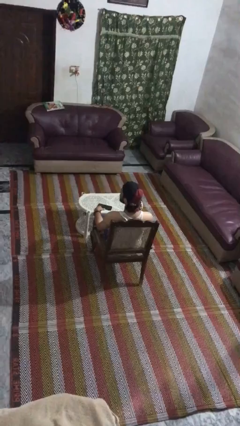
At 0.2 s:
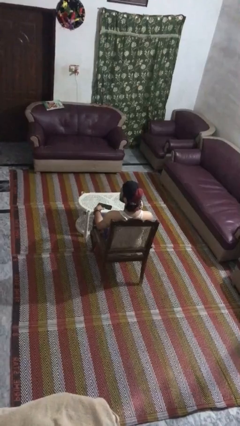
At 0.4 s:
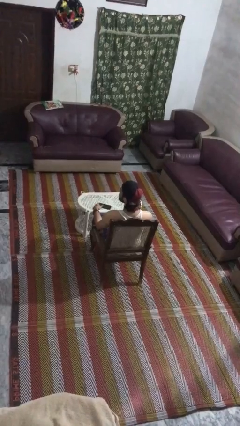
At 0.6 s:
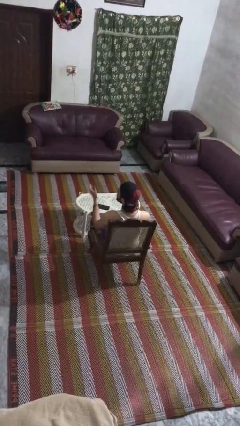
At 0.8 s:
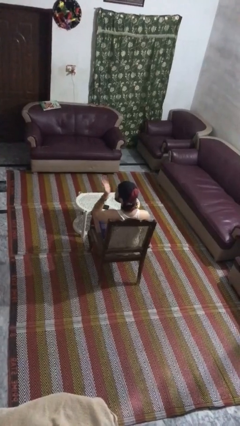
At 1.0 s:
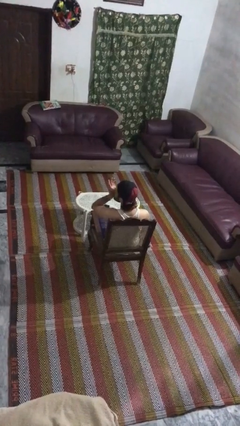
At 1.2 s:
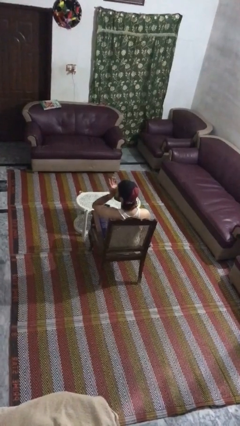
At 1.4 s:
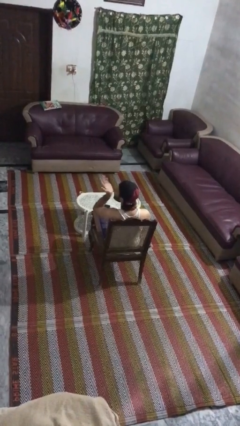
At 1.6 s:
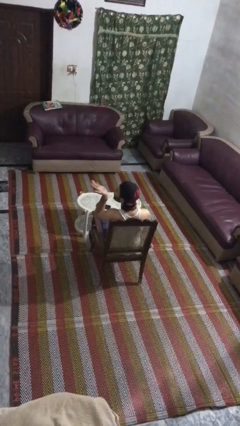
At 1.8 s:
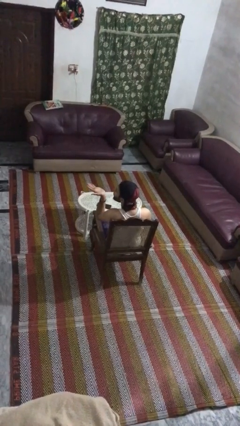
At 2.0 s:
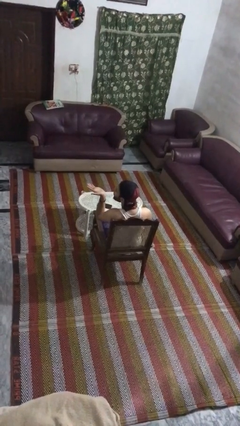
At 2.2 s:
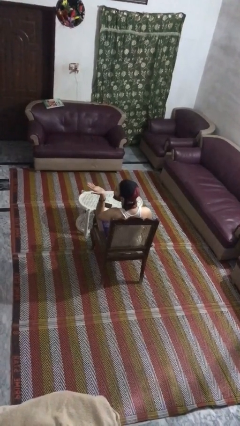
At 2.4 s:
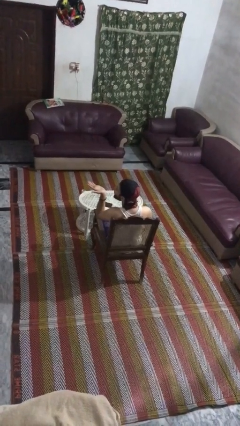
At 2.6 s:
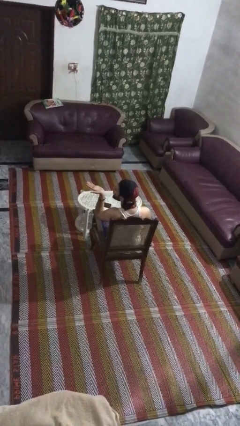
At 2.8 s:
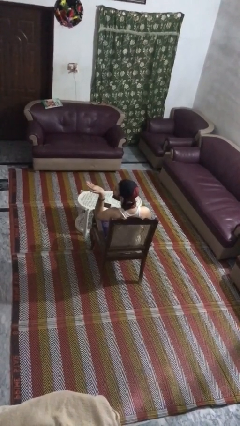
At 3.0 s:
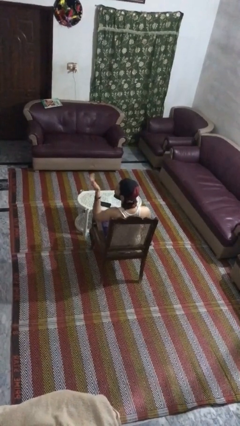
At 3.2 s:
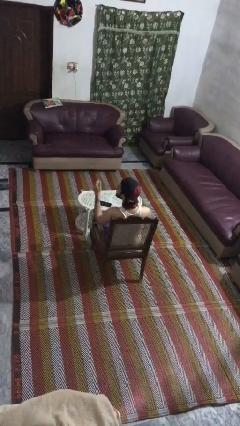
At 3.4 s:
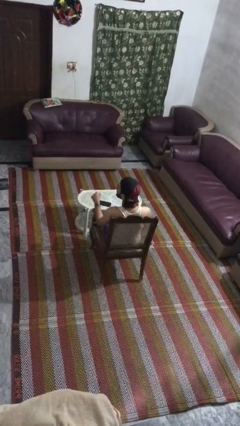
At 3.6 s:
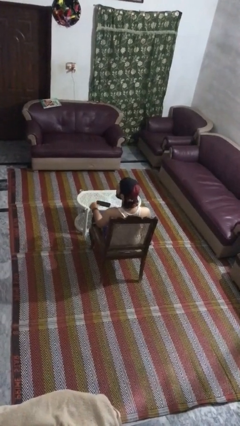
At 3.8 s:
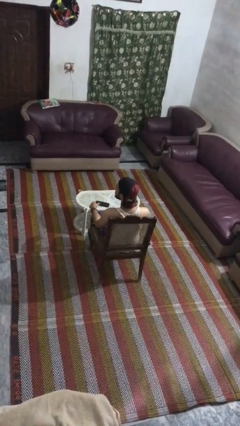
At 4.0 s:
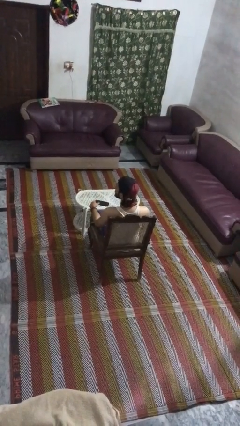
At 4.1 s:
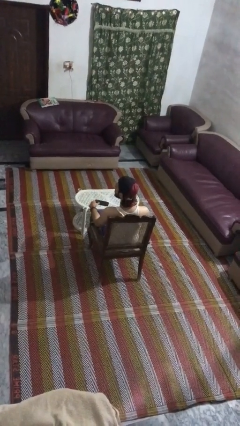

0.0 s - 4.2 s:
person gestures blow kiss

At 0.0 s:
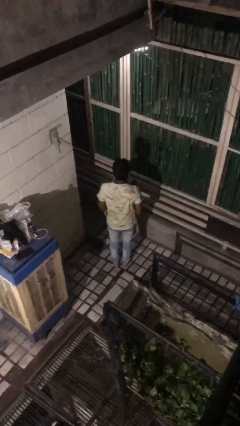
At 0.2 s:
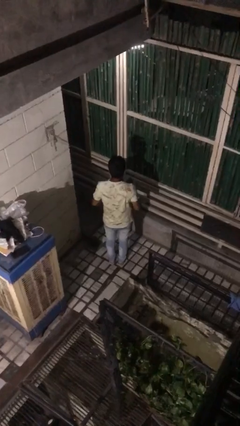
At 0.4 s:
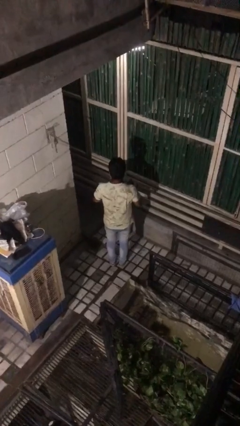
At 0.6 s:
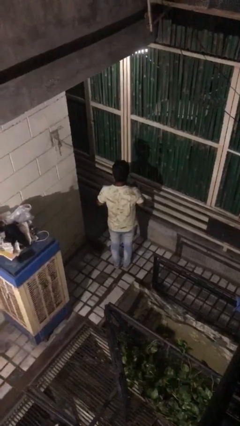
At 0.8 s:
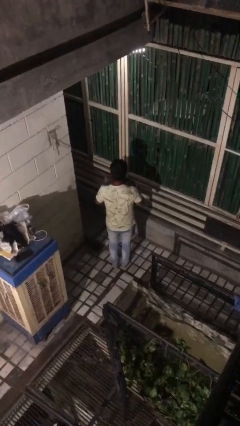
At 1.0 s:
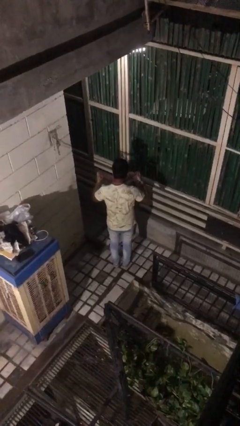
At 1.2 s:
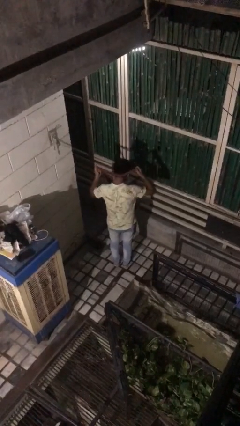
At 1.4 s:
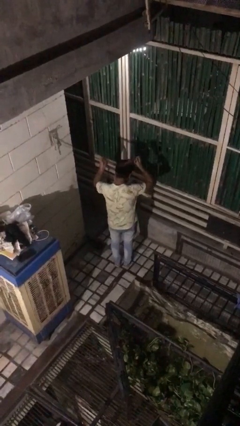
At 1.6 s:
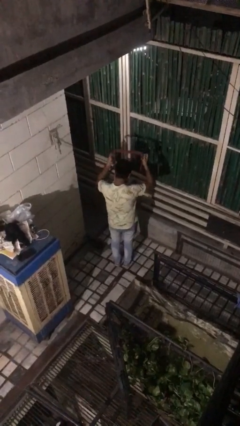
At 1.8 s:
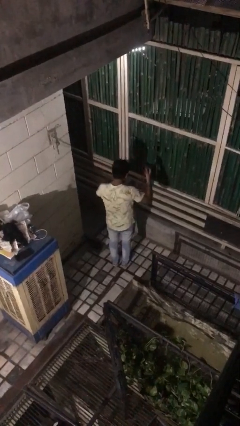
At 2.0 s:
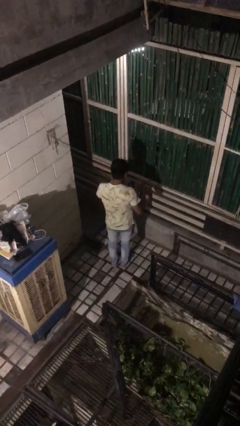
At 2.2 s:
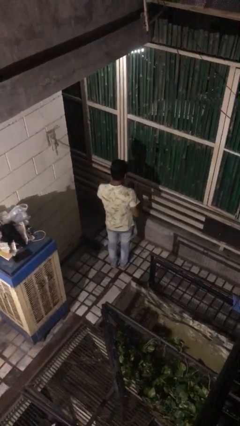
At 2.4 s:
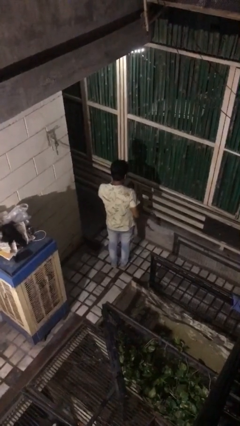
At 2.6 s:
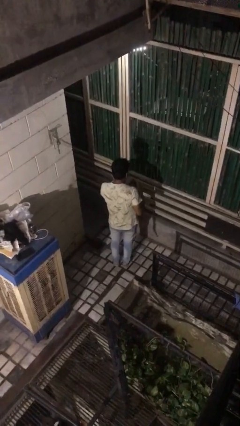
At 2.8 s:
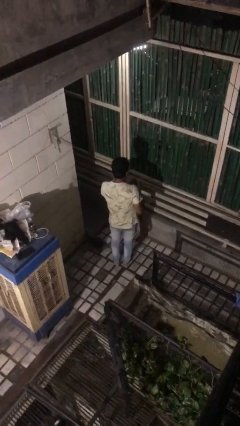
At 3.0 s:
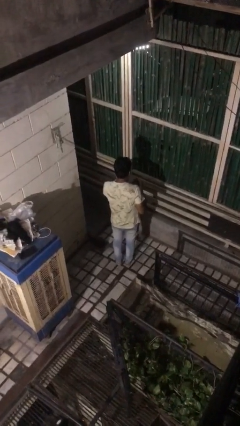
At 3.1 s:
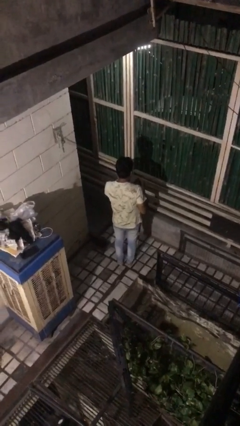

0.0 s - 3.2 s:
person takes off necktie

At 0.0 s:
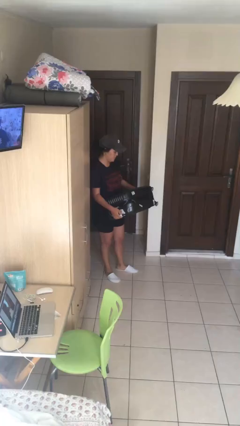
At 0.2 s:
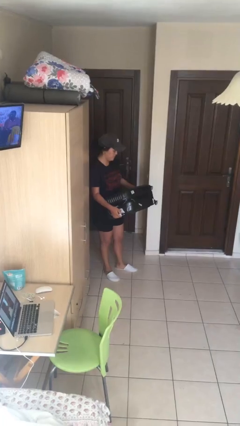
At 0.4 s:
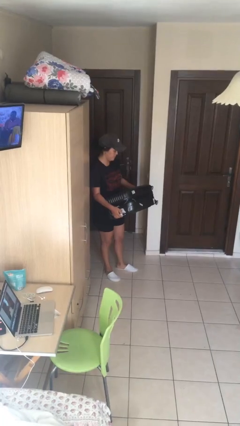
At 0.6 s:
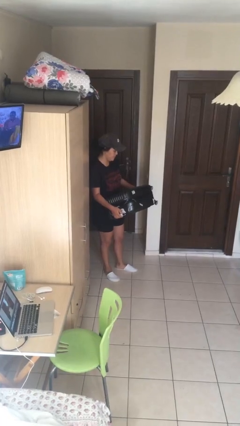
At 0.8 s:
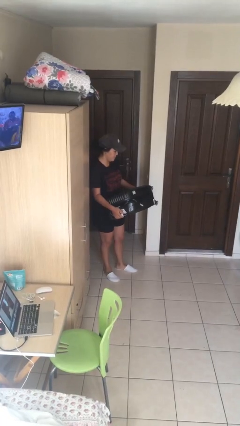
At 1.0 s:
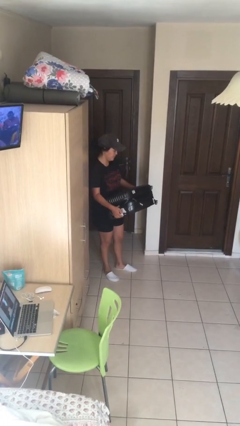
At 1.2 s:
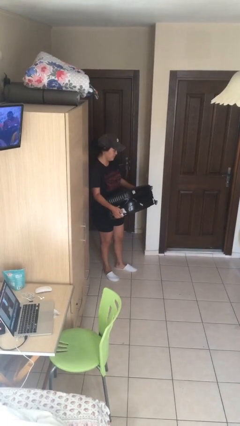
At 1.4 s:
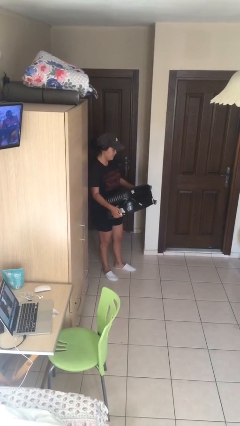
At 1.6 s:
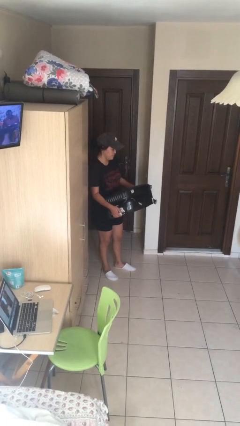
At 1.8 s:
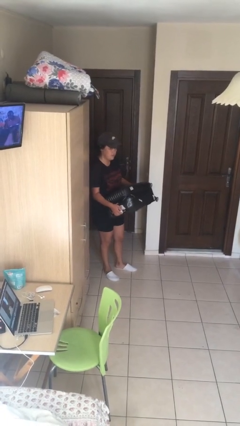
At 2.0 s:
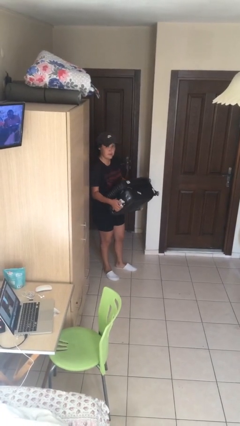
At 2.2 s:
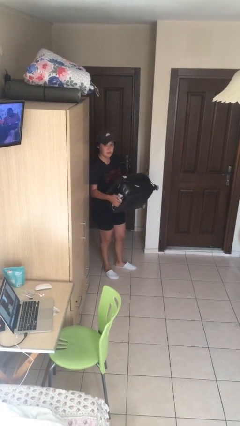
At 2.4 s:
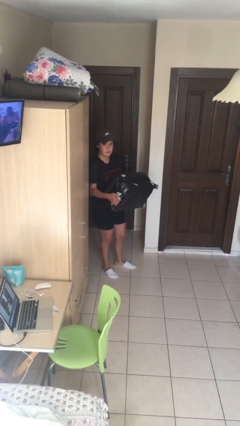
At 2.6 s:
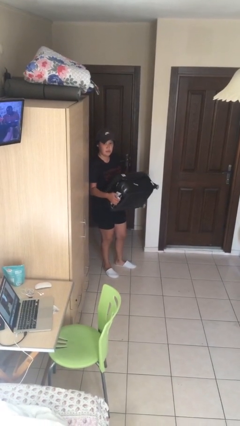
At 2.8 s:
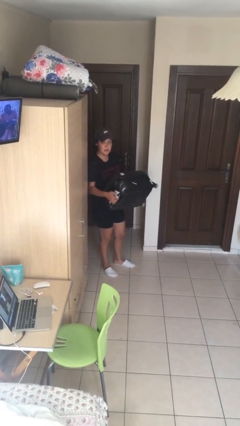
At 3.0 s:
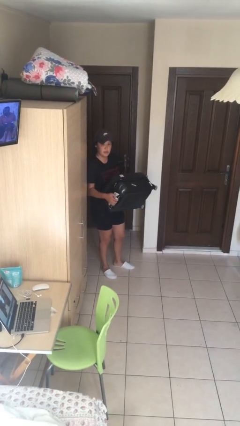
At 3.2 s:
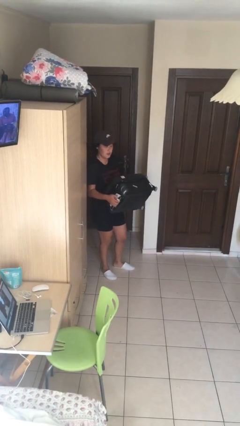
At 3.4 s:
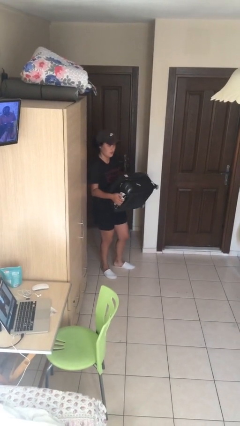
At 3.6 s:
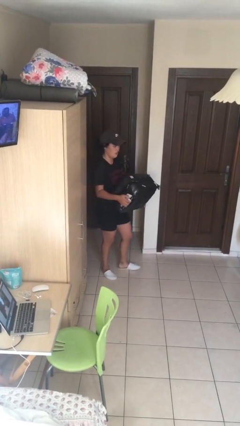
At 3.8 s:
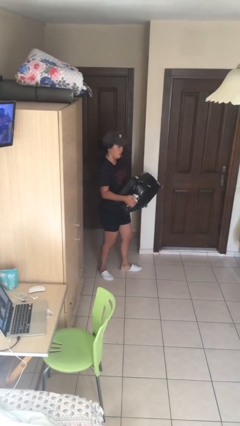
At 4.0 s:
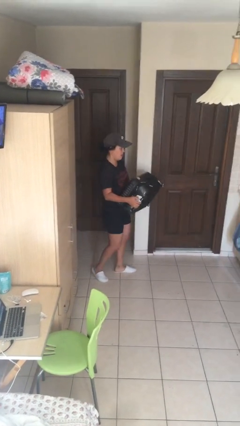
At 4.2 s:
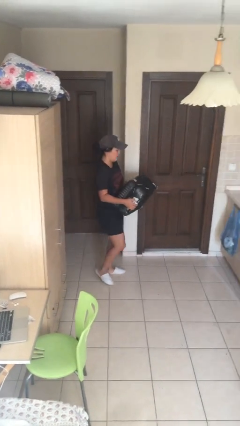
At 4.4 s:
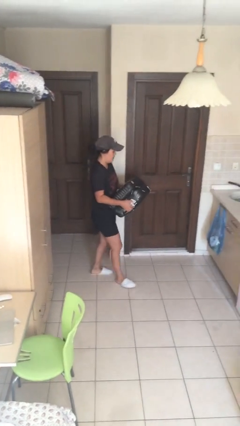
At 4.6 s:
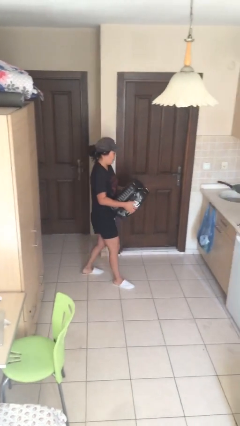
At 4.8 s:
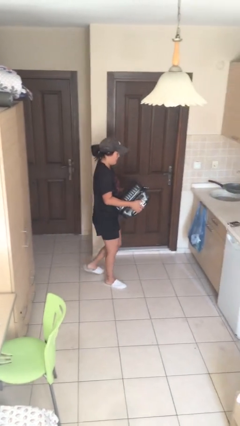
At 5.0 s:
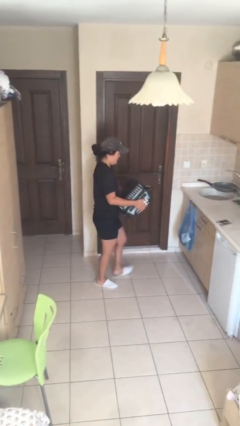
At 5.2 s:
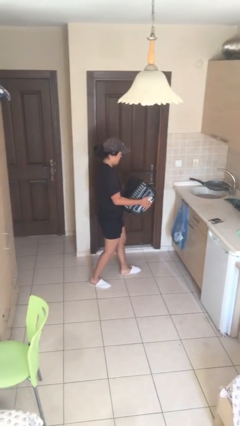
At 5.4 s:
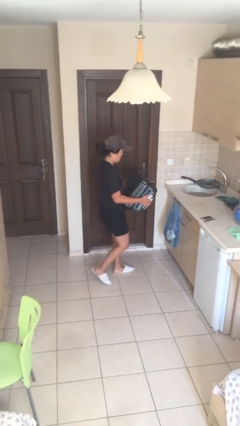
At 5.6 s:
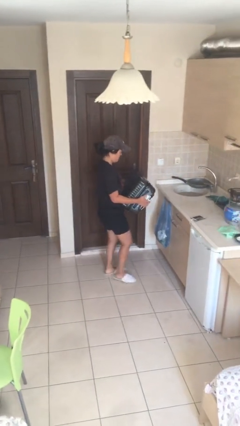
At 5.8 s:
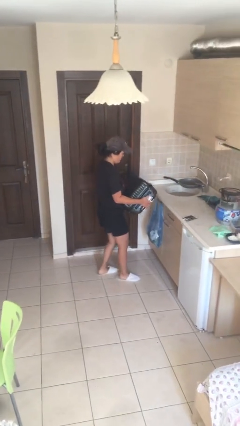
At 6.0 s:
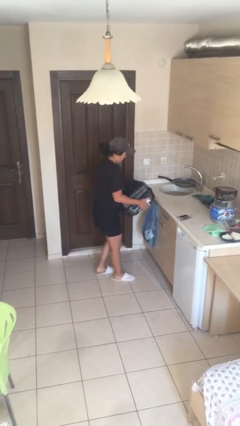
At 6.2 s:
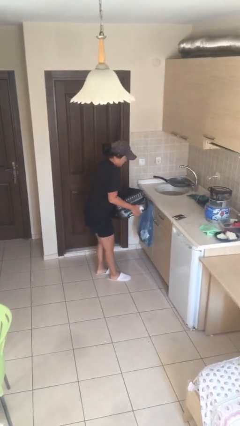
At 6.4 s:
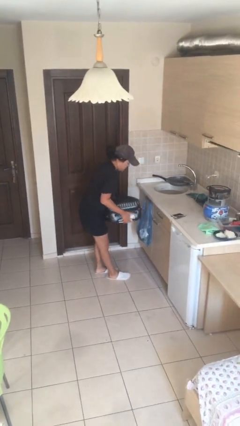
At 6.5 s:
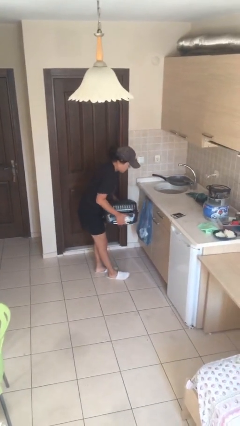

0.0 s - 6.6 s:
person carries heavy object

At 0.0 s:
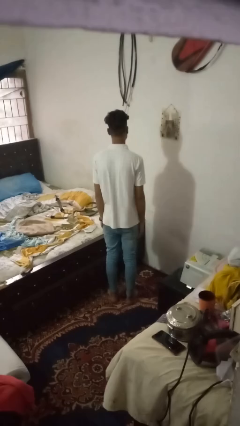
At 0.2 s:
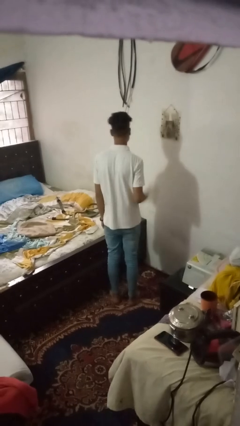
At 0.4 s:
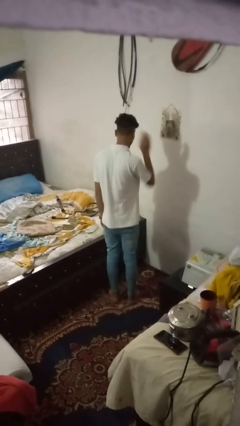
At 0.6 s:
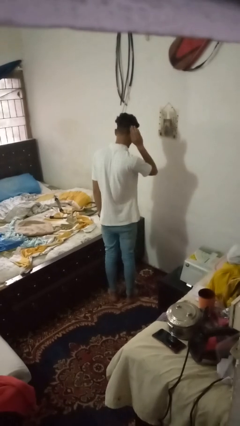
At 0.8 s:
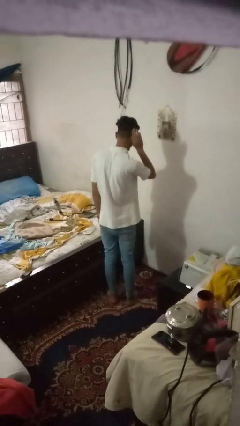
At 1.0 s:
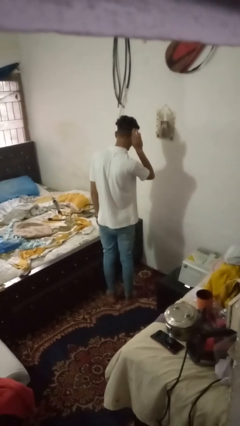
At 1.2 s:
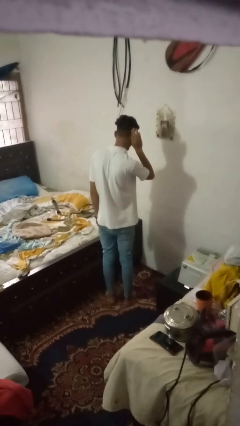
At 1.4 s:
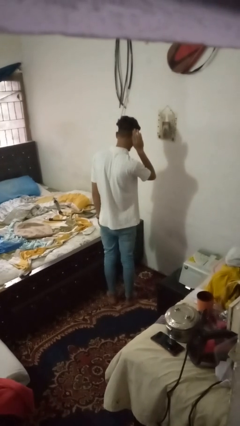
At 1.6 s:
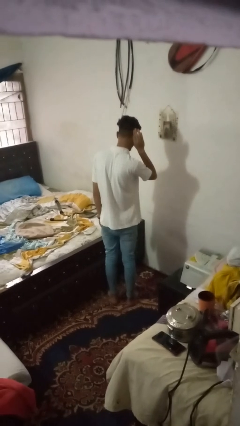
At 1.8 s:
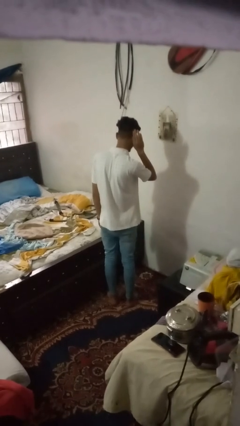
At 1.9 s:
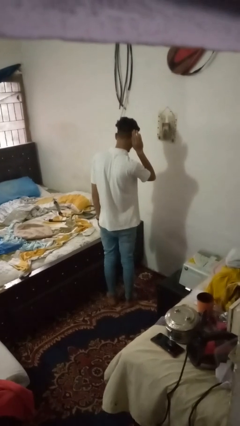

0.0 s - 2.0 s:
person gestures listen closely

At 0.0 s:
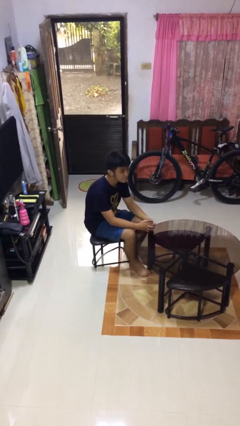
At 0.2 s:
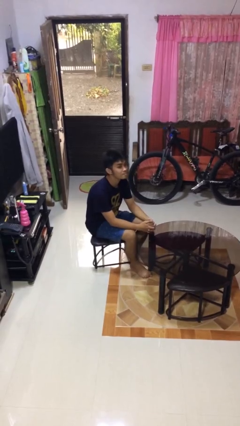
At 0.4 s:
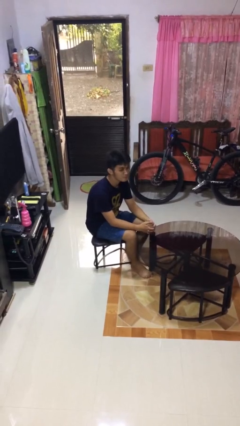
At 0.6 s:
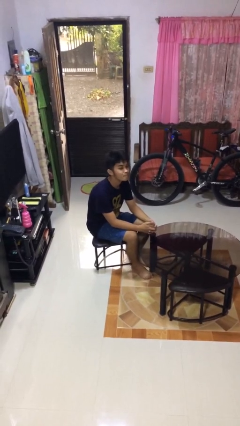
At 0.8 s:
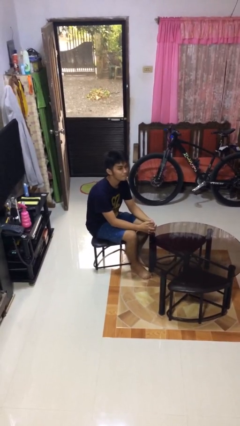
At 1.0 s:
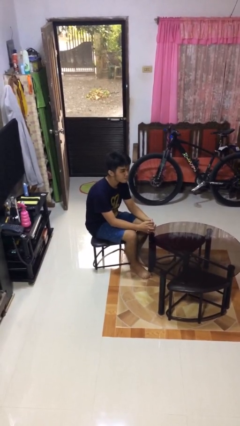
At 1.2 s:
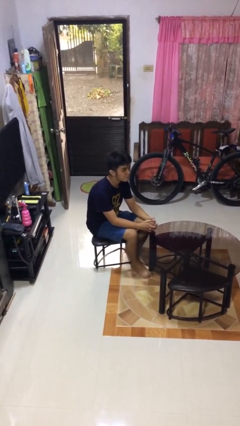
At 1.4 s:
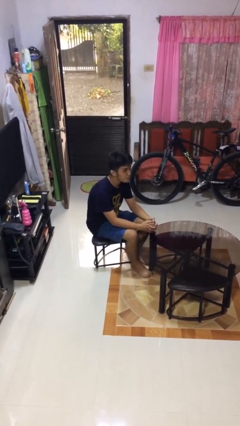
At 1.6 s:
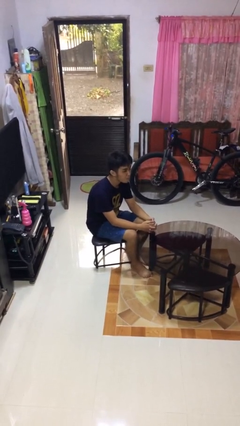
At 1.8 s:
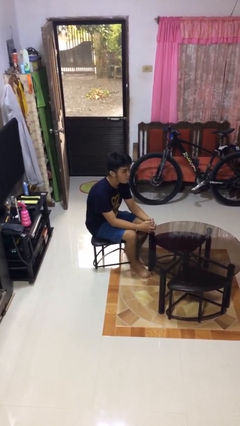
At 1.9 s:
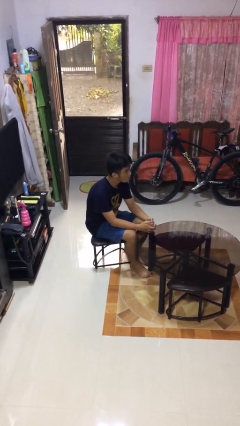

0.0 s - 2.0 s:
person nods head
